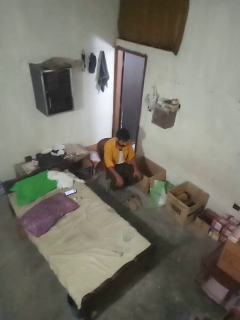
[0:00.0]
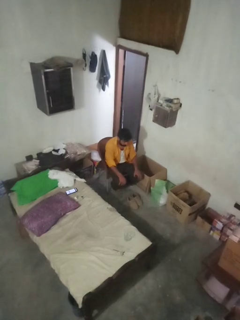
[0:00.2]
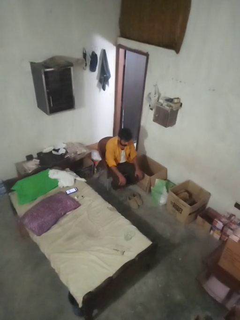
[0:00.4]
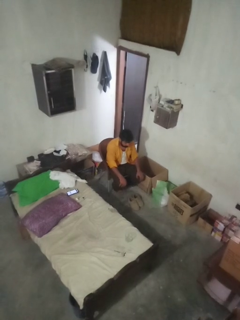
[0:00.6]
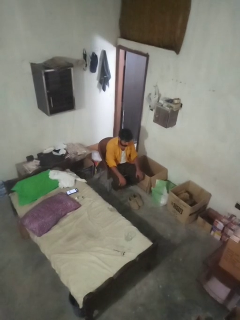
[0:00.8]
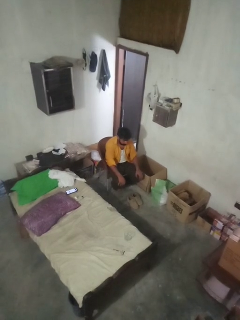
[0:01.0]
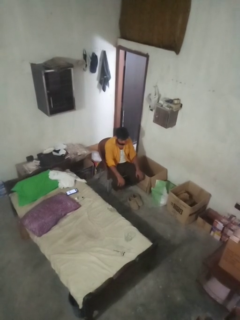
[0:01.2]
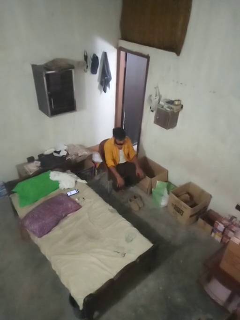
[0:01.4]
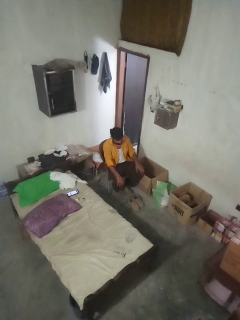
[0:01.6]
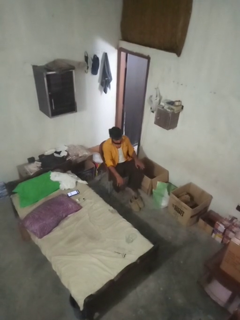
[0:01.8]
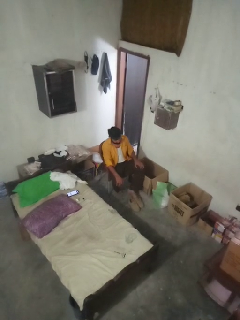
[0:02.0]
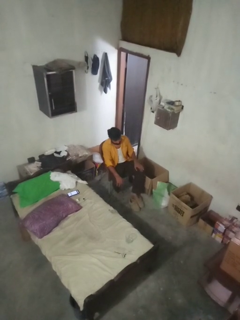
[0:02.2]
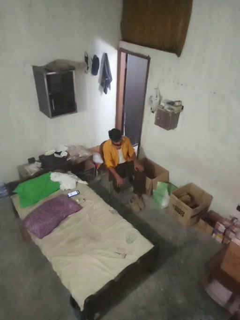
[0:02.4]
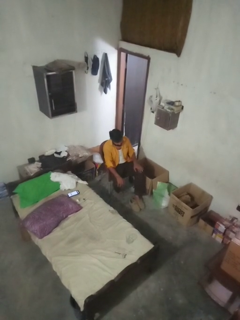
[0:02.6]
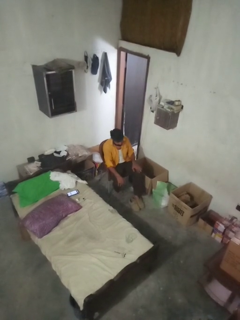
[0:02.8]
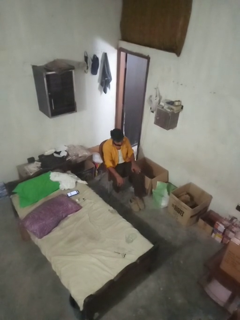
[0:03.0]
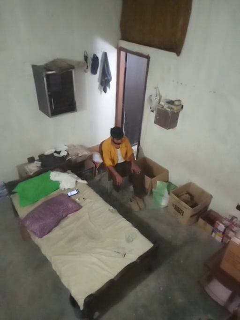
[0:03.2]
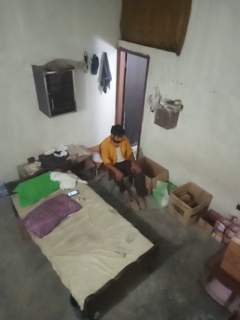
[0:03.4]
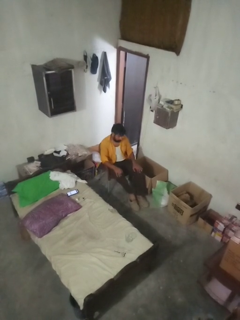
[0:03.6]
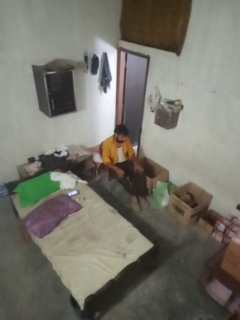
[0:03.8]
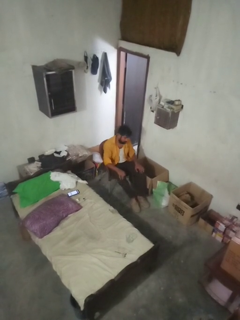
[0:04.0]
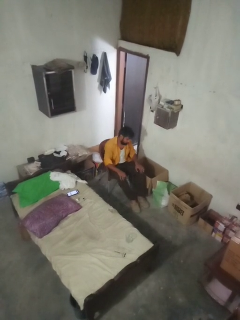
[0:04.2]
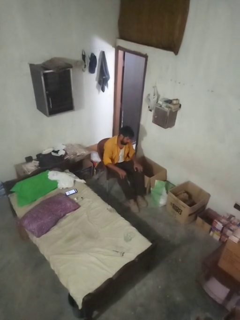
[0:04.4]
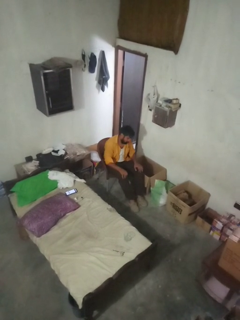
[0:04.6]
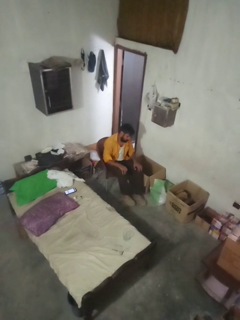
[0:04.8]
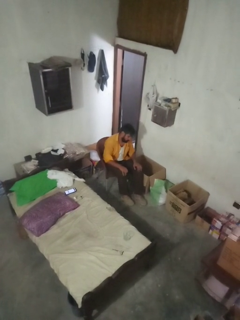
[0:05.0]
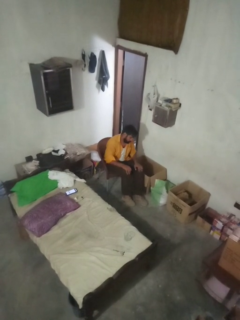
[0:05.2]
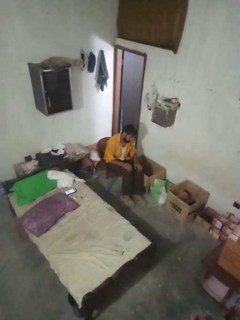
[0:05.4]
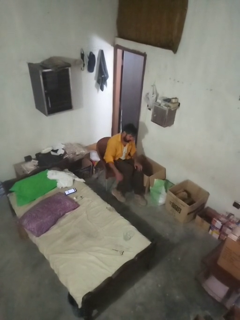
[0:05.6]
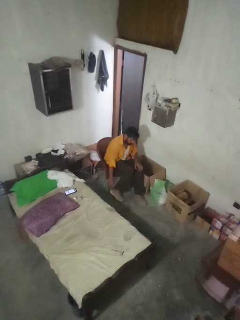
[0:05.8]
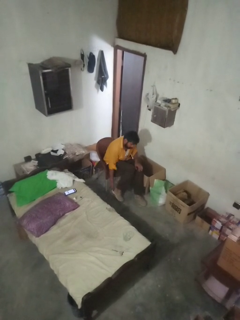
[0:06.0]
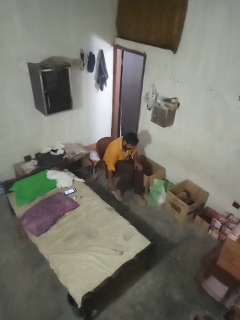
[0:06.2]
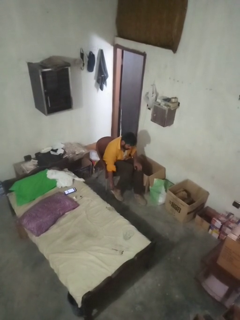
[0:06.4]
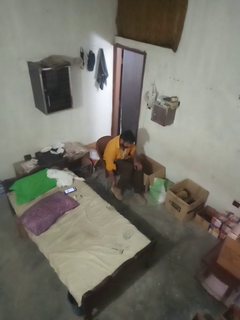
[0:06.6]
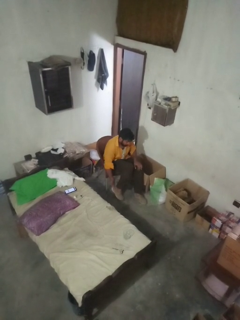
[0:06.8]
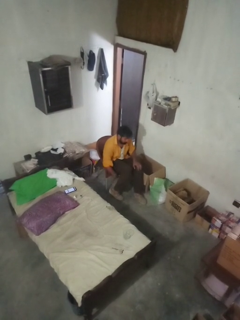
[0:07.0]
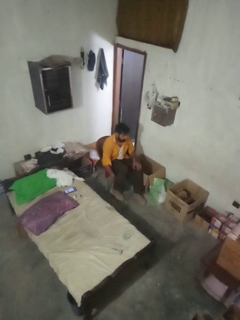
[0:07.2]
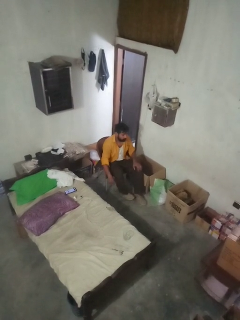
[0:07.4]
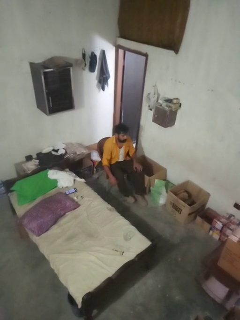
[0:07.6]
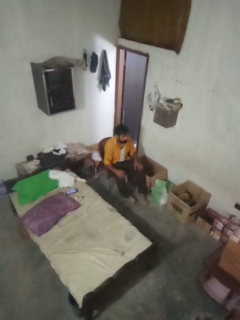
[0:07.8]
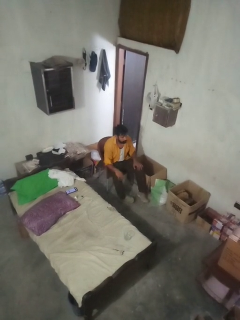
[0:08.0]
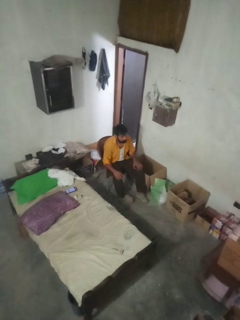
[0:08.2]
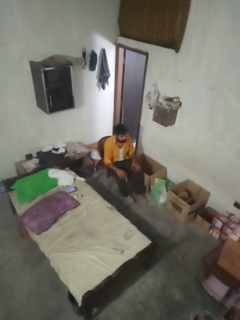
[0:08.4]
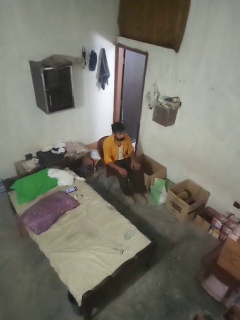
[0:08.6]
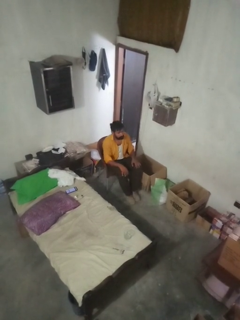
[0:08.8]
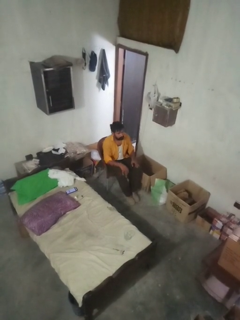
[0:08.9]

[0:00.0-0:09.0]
person puts on boots

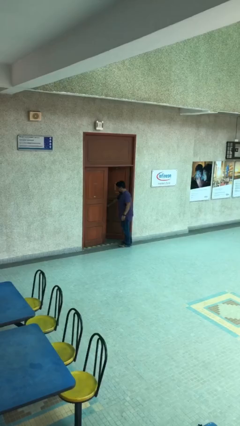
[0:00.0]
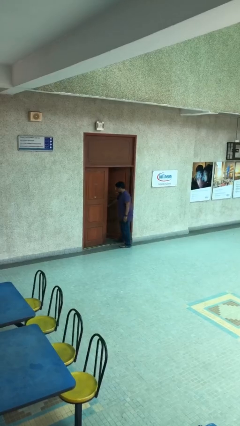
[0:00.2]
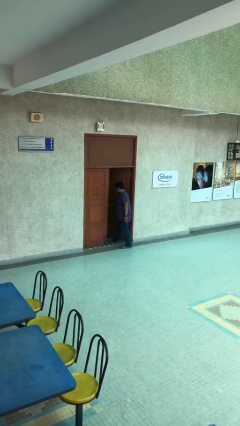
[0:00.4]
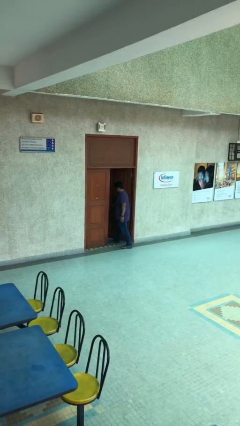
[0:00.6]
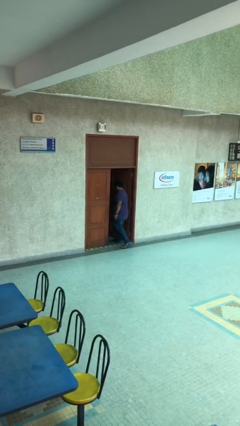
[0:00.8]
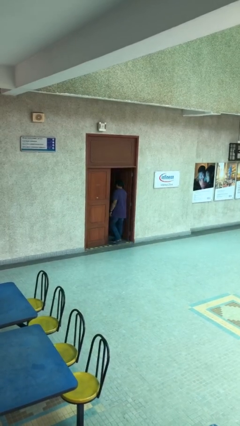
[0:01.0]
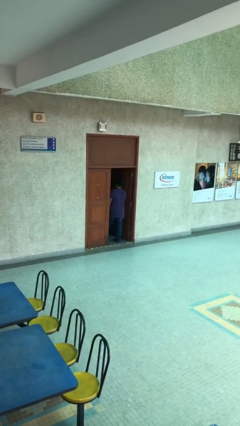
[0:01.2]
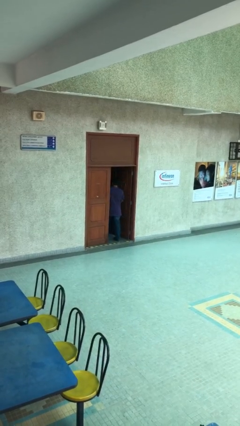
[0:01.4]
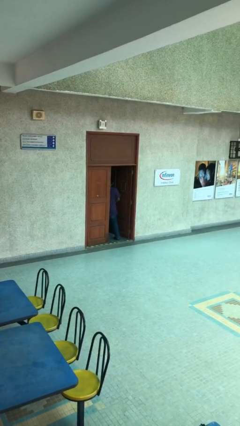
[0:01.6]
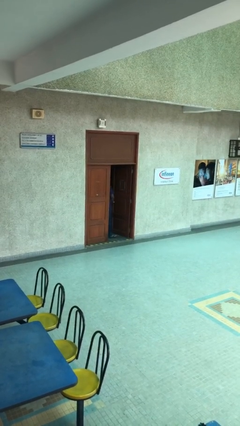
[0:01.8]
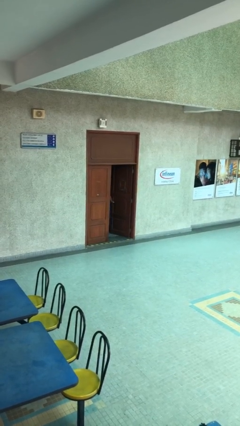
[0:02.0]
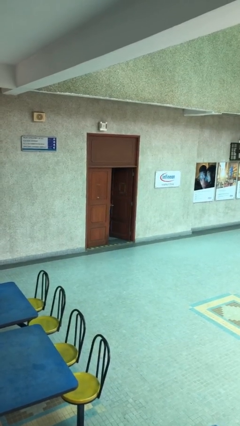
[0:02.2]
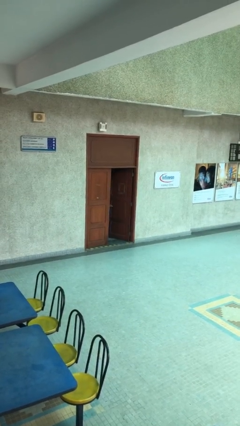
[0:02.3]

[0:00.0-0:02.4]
person exits scene through structure

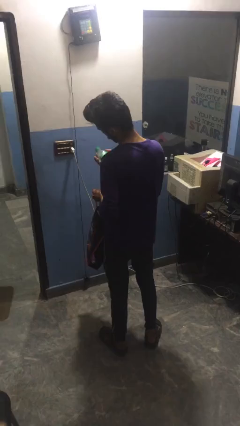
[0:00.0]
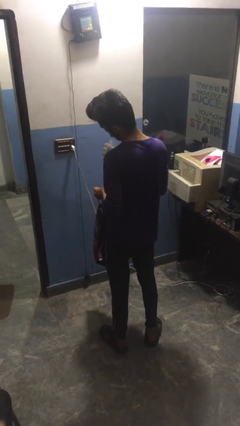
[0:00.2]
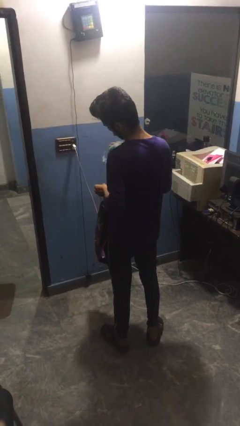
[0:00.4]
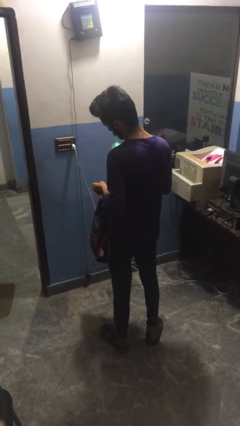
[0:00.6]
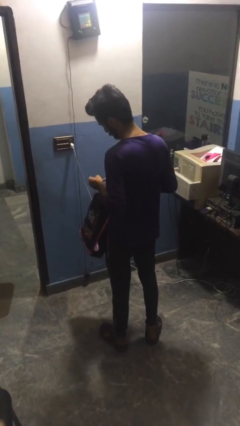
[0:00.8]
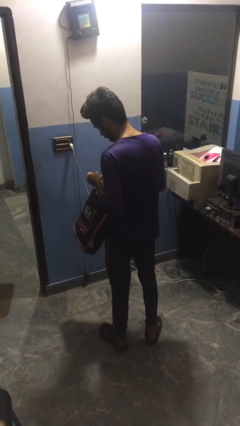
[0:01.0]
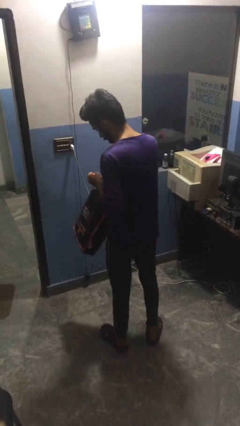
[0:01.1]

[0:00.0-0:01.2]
person puts object into bag

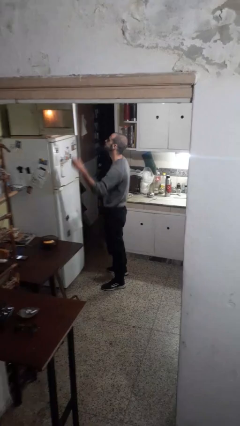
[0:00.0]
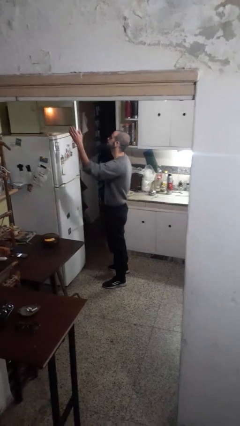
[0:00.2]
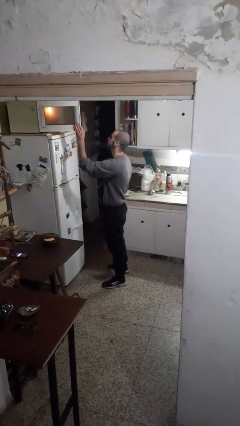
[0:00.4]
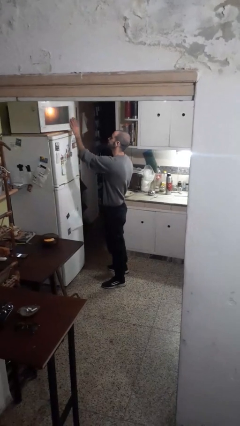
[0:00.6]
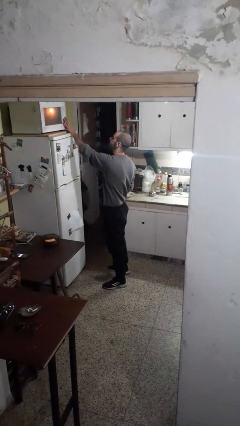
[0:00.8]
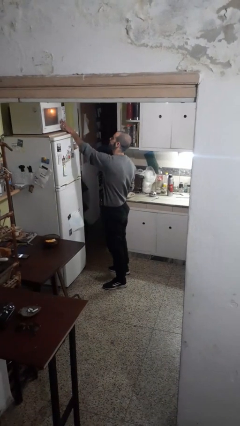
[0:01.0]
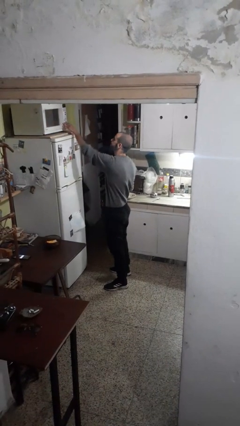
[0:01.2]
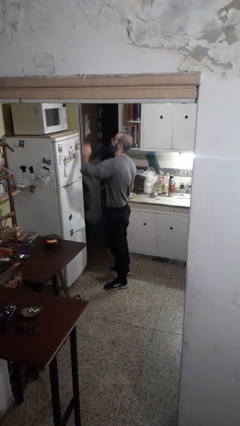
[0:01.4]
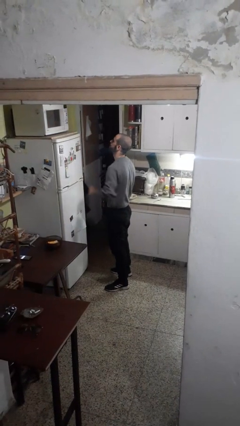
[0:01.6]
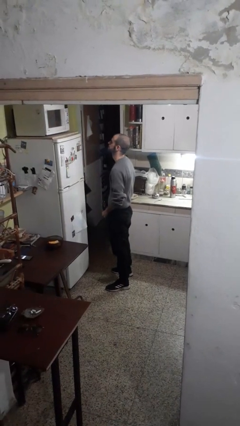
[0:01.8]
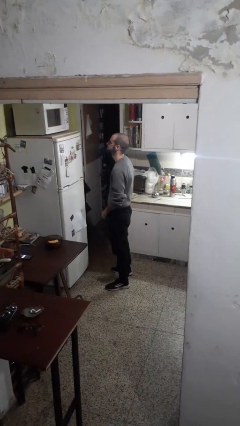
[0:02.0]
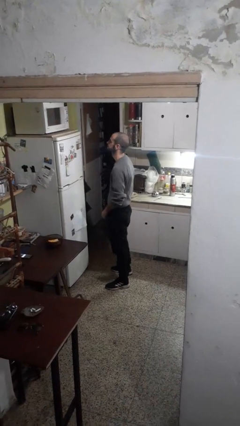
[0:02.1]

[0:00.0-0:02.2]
person closes microwave

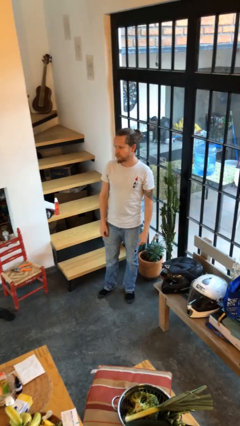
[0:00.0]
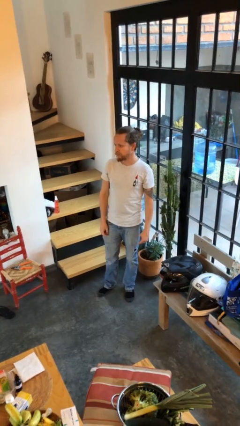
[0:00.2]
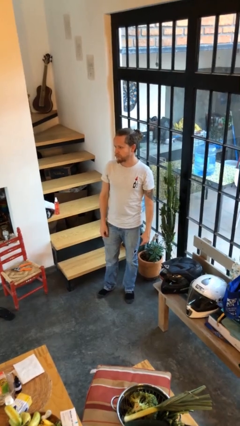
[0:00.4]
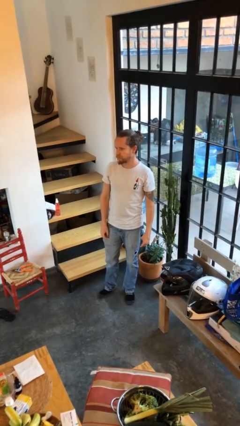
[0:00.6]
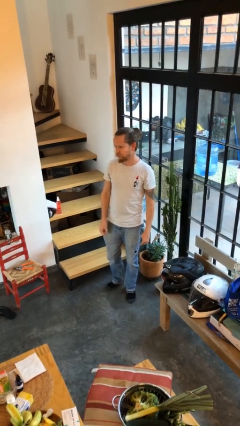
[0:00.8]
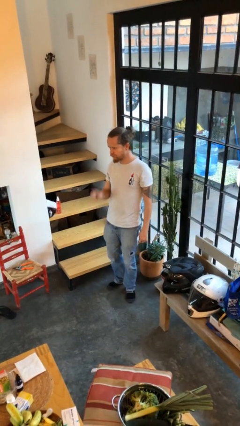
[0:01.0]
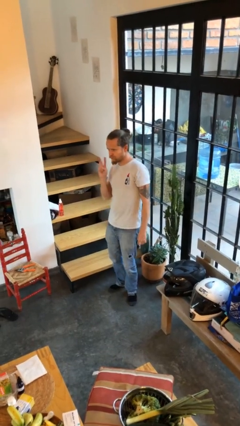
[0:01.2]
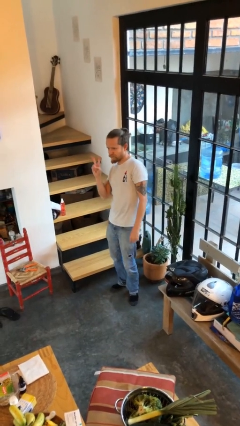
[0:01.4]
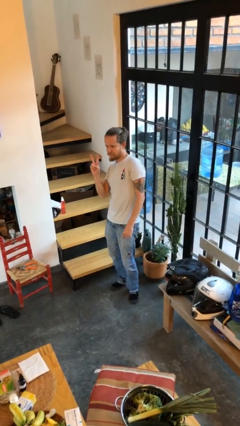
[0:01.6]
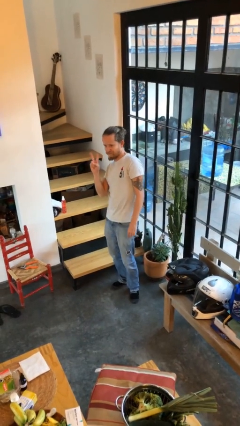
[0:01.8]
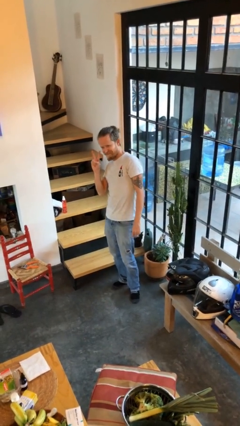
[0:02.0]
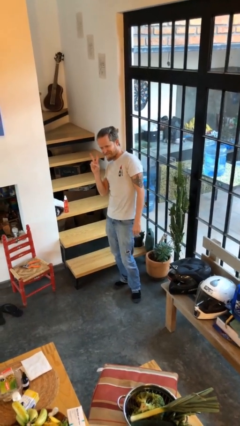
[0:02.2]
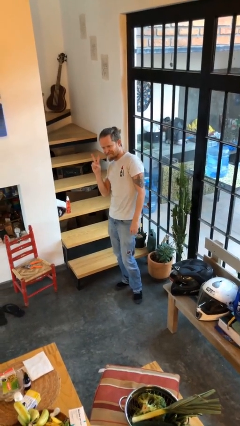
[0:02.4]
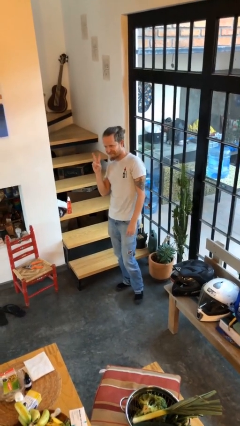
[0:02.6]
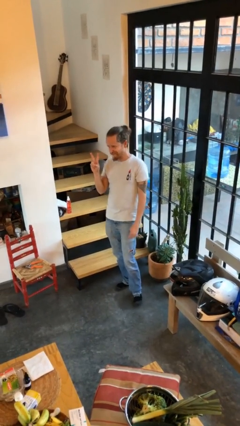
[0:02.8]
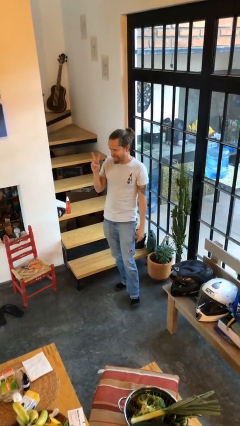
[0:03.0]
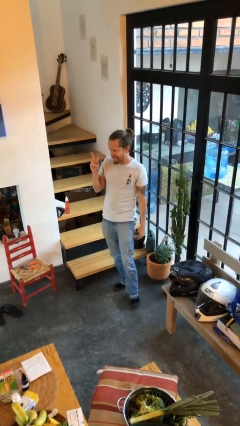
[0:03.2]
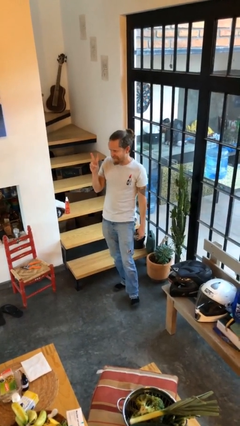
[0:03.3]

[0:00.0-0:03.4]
person gestures peace

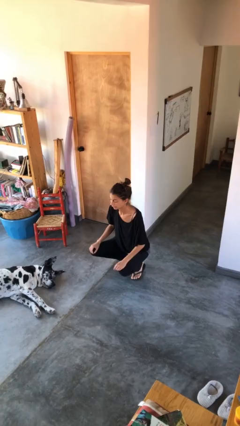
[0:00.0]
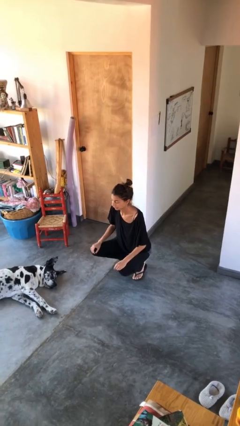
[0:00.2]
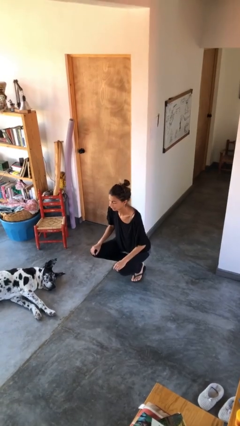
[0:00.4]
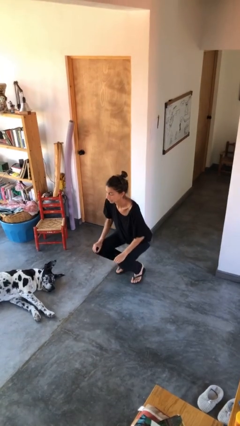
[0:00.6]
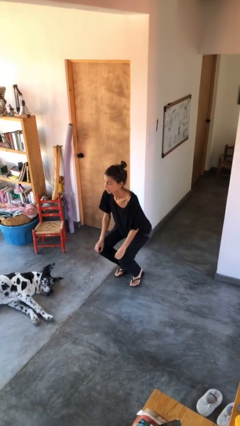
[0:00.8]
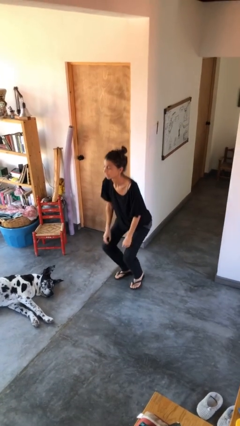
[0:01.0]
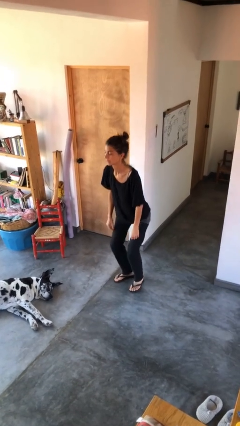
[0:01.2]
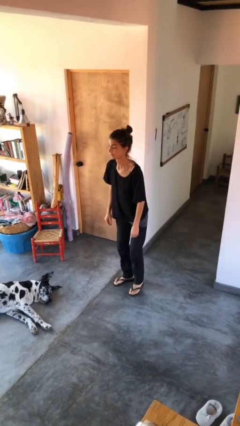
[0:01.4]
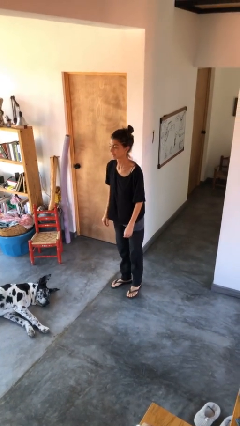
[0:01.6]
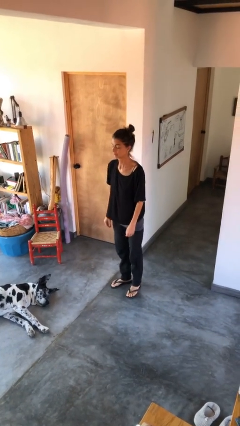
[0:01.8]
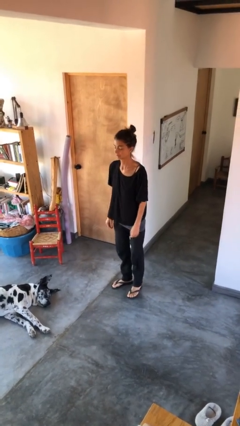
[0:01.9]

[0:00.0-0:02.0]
person stands up
